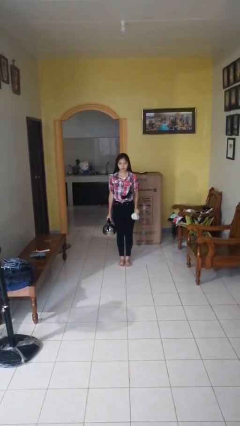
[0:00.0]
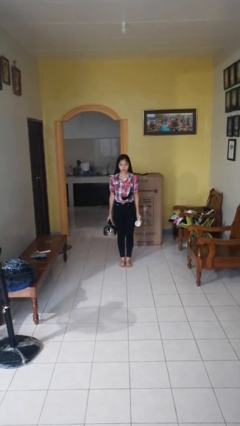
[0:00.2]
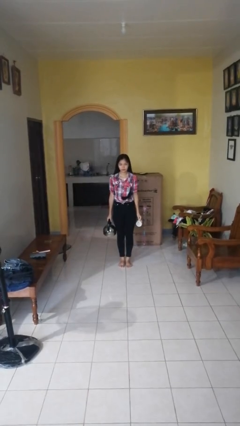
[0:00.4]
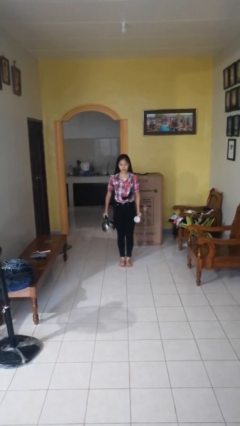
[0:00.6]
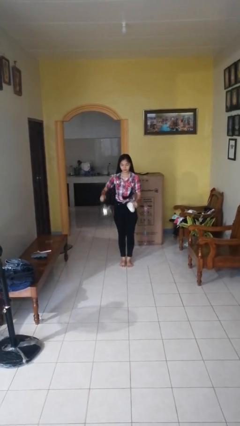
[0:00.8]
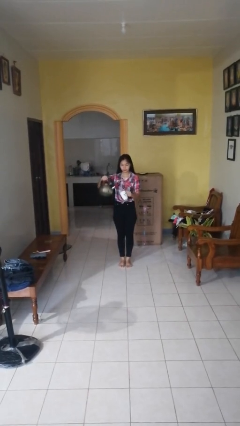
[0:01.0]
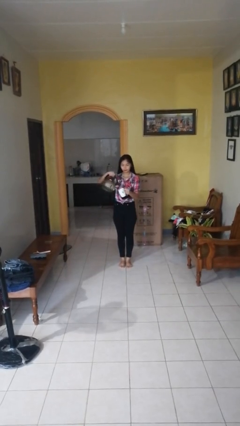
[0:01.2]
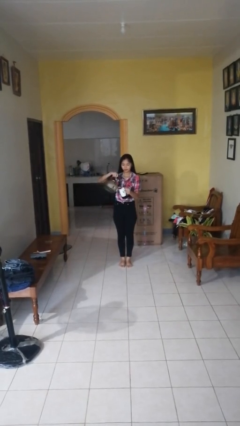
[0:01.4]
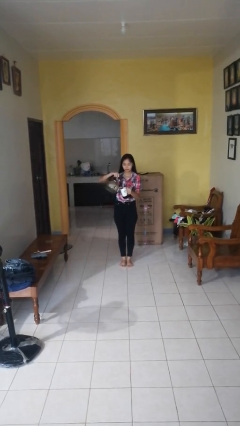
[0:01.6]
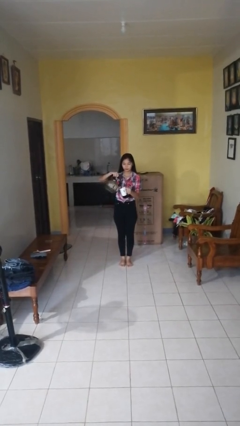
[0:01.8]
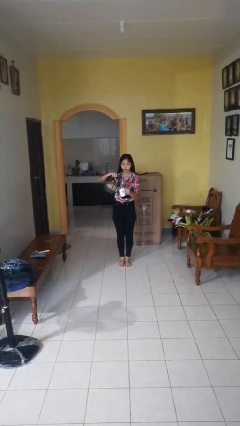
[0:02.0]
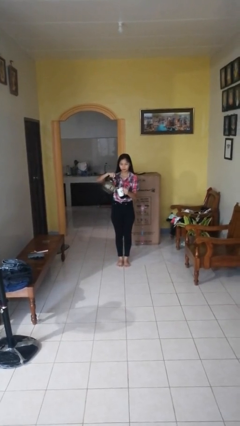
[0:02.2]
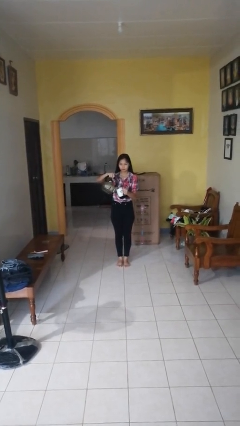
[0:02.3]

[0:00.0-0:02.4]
person pours coffee into mug

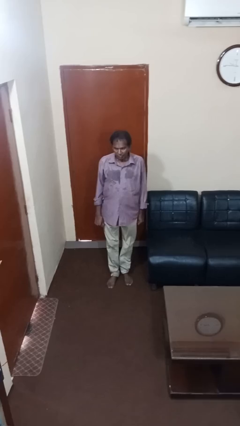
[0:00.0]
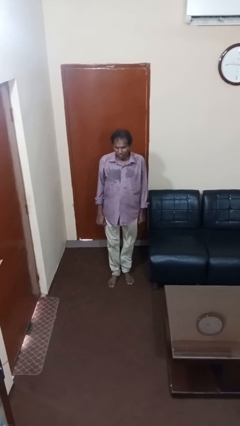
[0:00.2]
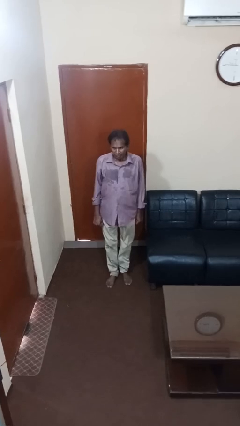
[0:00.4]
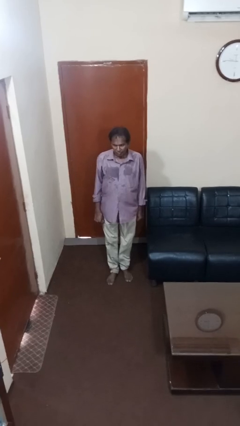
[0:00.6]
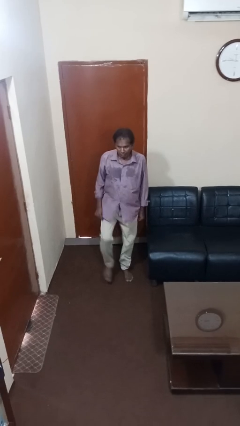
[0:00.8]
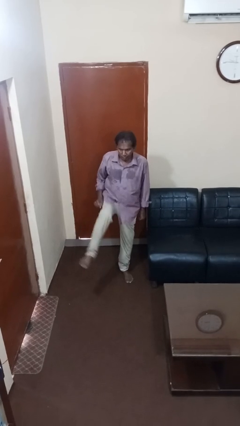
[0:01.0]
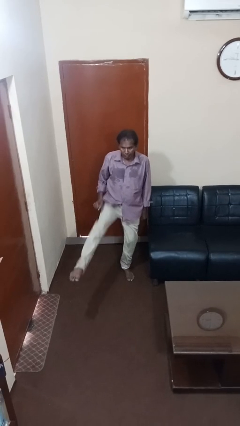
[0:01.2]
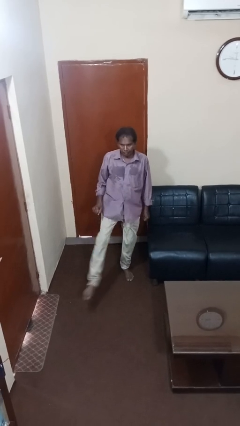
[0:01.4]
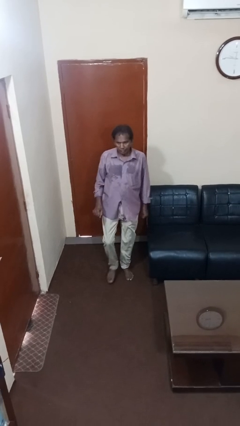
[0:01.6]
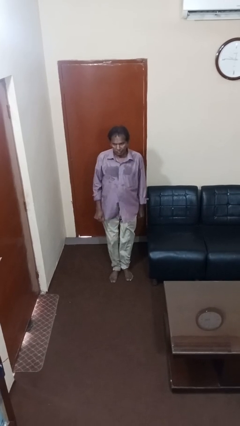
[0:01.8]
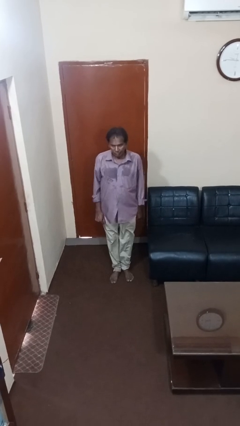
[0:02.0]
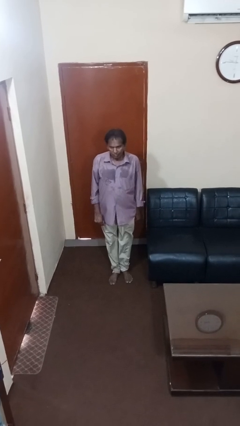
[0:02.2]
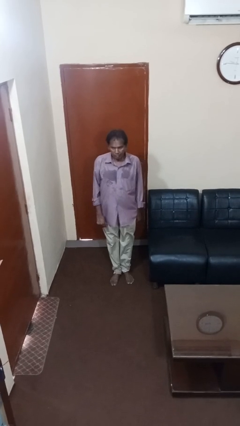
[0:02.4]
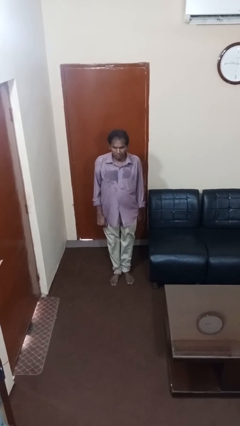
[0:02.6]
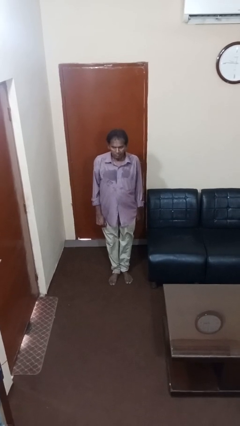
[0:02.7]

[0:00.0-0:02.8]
person karate kicks

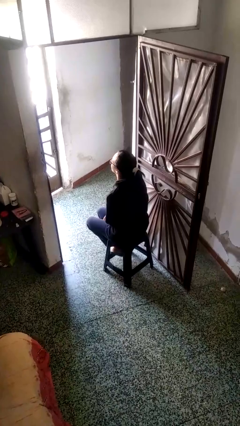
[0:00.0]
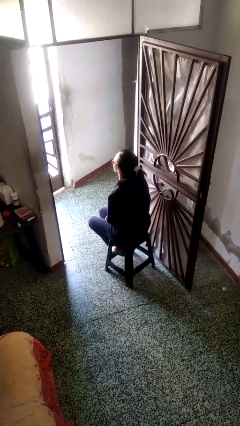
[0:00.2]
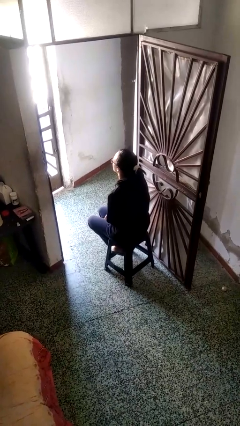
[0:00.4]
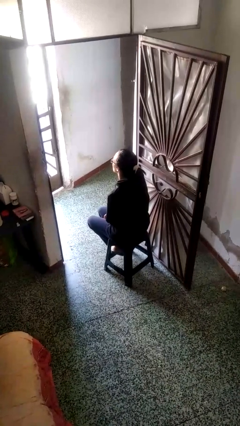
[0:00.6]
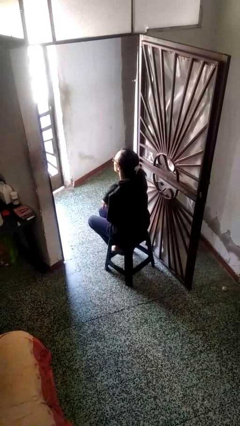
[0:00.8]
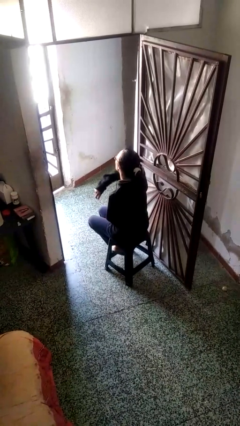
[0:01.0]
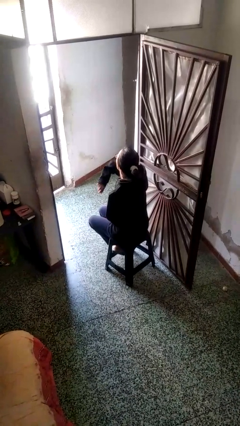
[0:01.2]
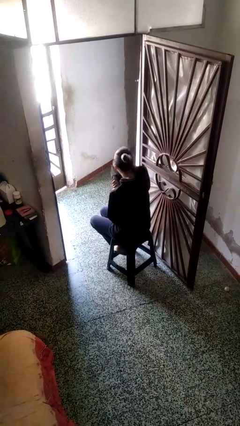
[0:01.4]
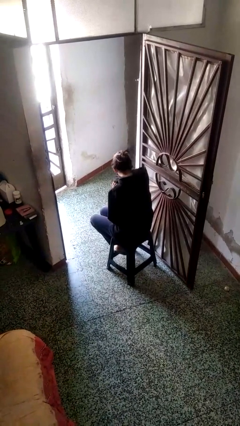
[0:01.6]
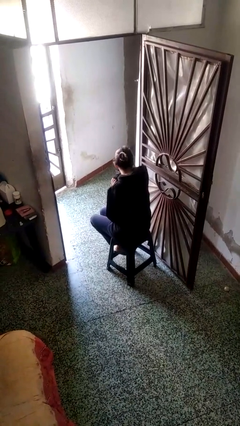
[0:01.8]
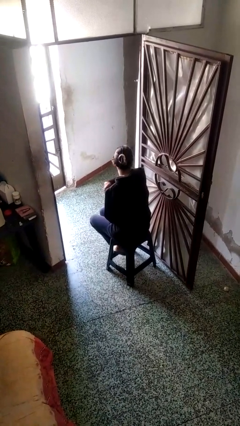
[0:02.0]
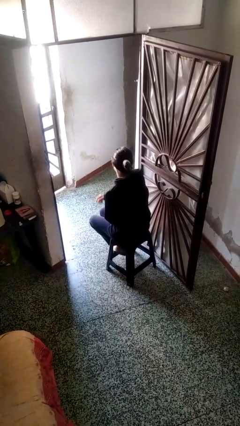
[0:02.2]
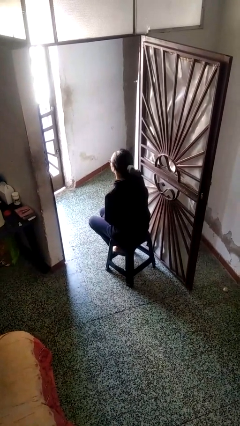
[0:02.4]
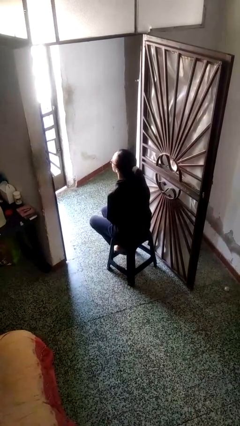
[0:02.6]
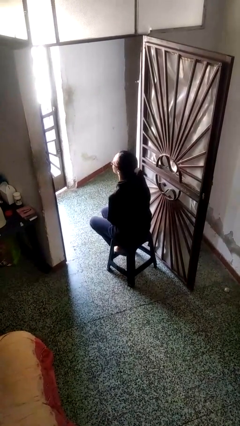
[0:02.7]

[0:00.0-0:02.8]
person sneezes into arm

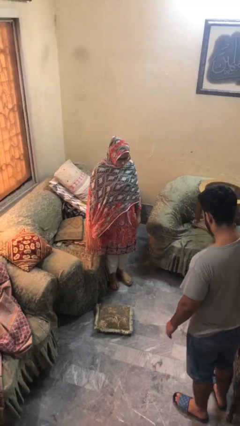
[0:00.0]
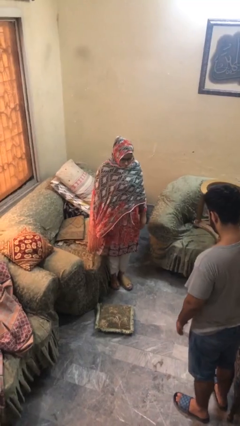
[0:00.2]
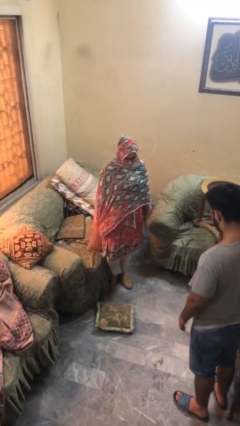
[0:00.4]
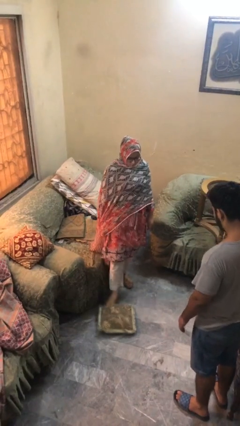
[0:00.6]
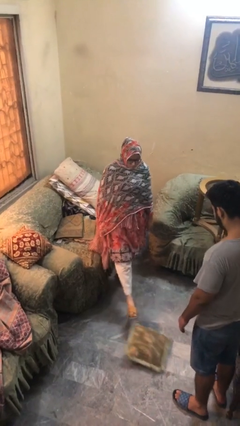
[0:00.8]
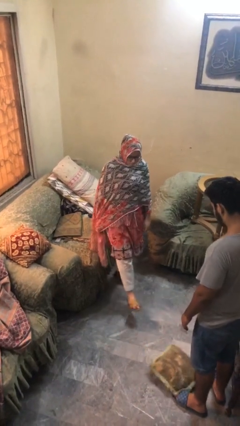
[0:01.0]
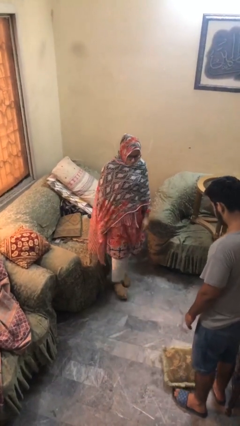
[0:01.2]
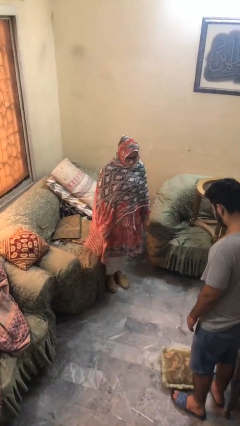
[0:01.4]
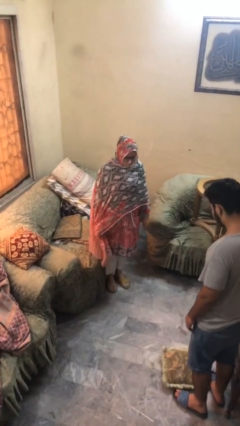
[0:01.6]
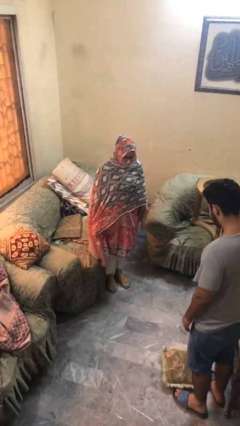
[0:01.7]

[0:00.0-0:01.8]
person kicks object to person

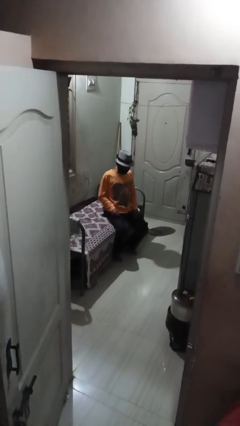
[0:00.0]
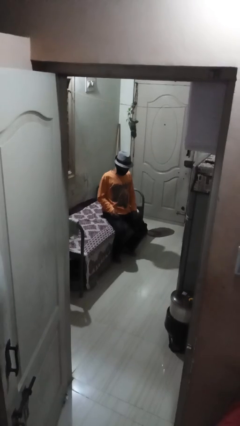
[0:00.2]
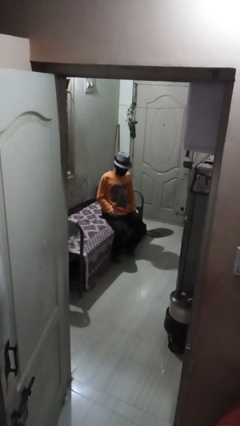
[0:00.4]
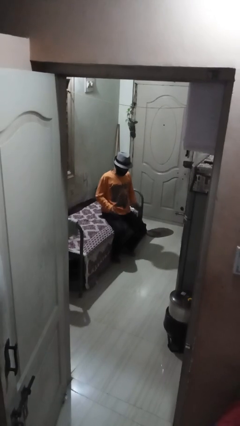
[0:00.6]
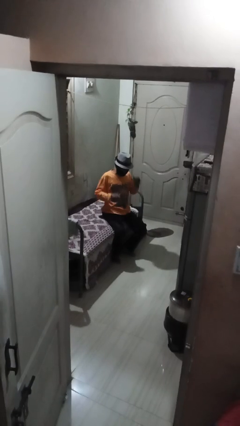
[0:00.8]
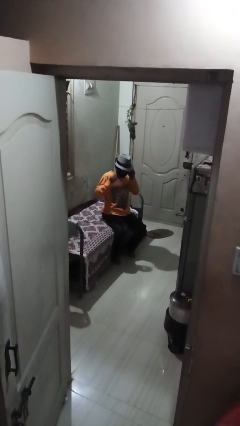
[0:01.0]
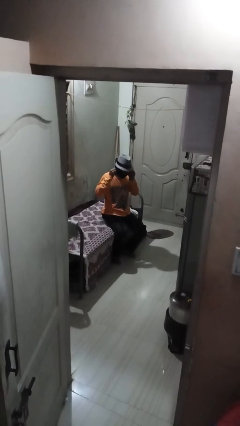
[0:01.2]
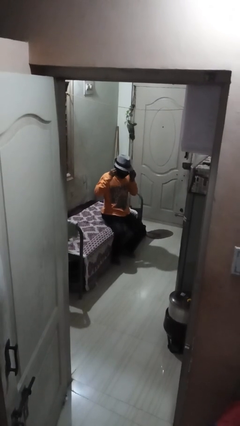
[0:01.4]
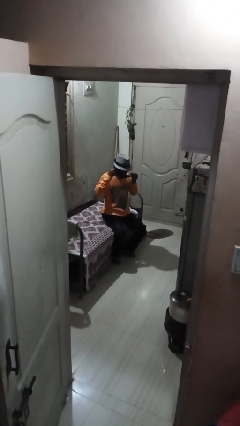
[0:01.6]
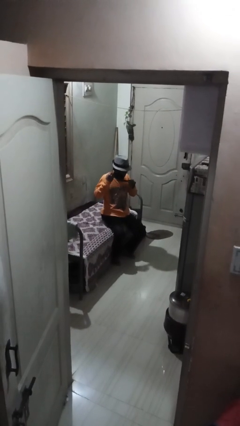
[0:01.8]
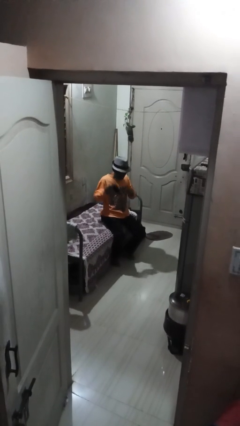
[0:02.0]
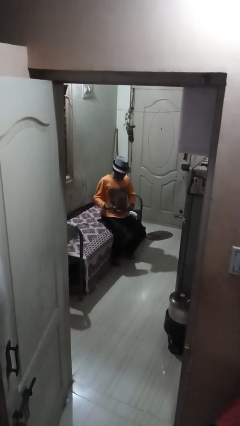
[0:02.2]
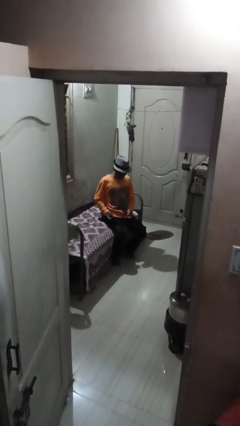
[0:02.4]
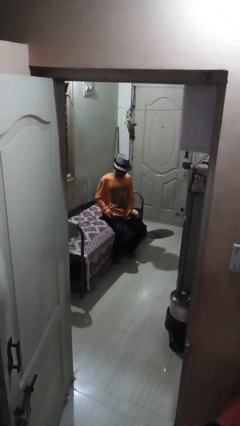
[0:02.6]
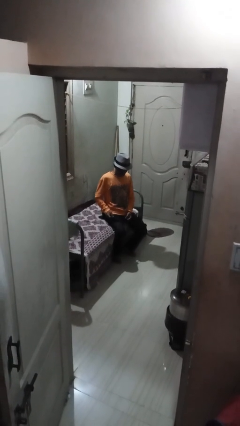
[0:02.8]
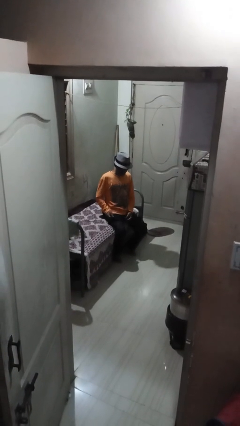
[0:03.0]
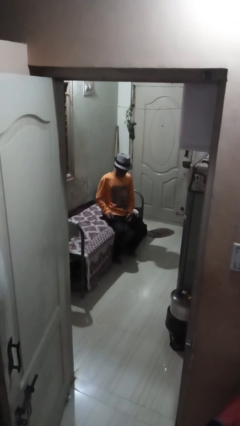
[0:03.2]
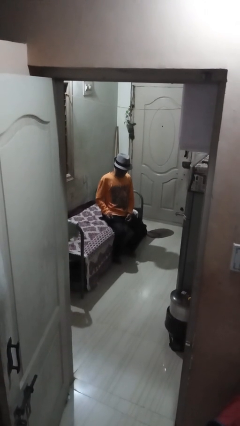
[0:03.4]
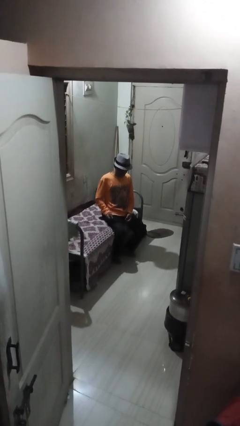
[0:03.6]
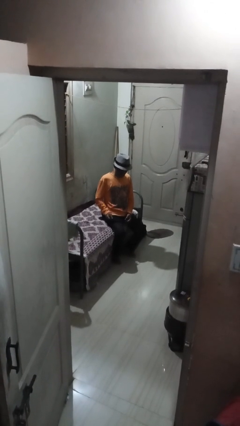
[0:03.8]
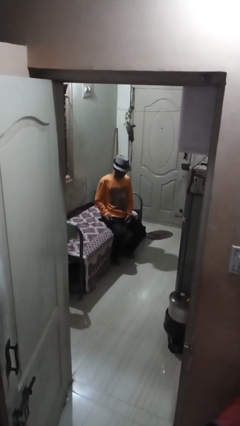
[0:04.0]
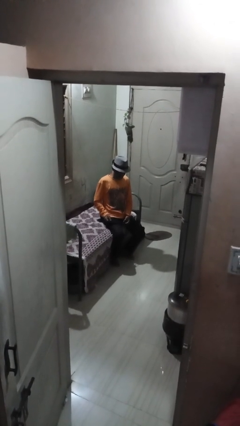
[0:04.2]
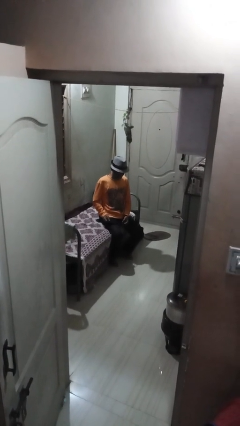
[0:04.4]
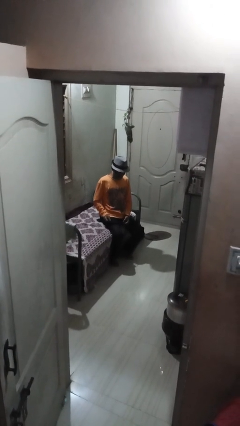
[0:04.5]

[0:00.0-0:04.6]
person takes off facemask

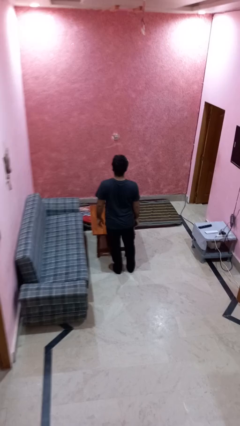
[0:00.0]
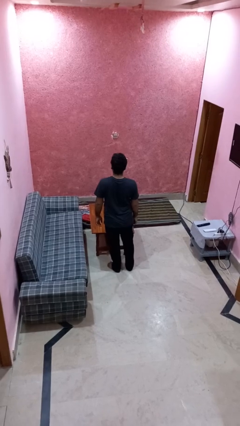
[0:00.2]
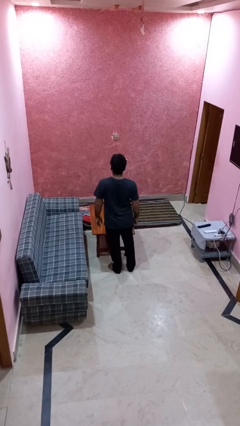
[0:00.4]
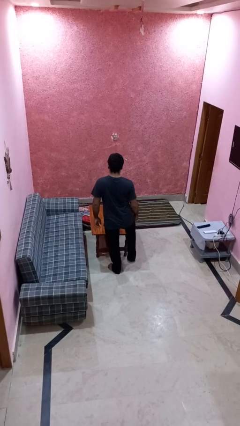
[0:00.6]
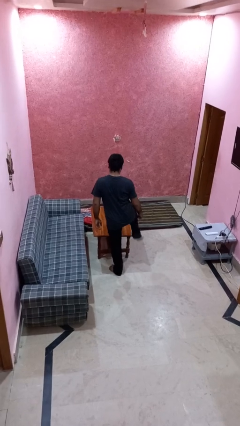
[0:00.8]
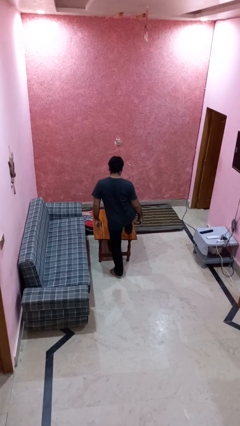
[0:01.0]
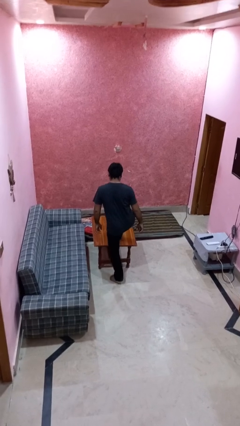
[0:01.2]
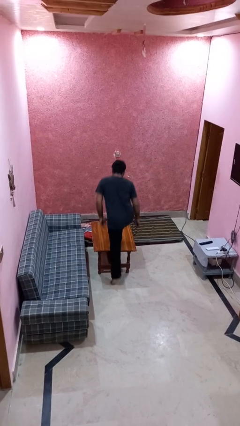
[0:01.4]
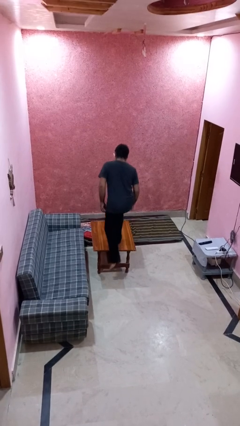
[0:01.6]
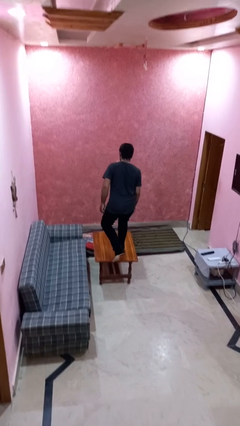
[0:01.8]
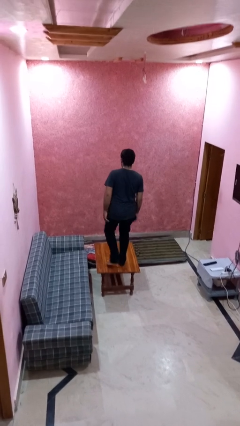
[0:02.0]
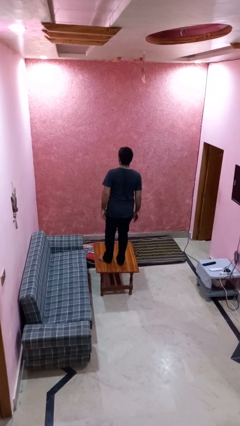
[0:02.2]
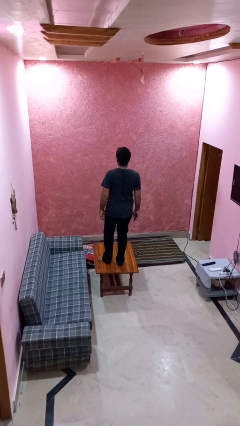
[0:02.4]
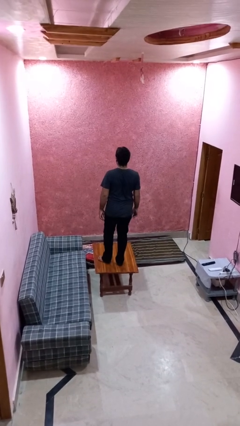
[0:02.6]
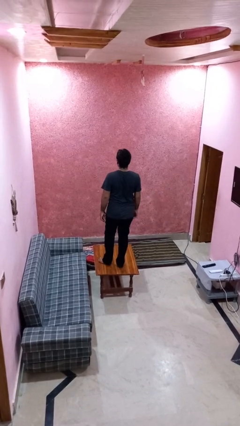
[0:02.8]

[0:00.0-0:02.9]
person climbs on table

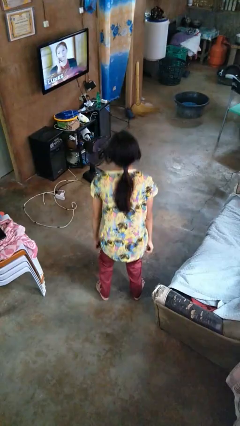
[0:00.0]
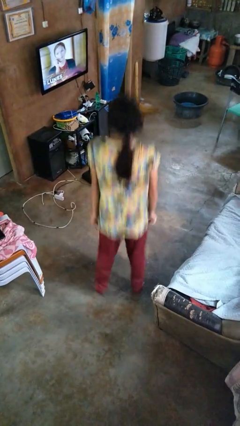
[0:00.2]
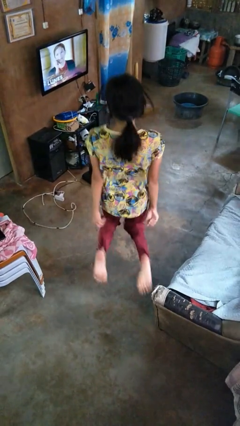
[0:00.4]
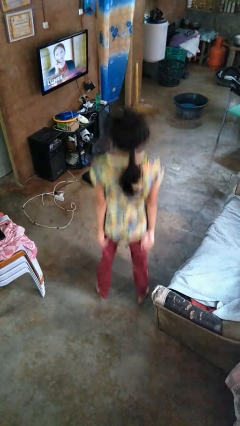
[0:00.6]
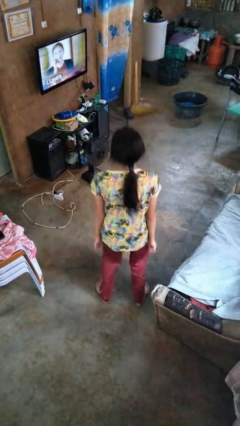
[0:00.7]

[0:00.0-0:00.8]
person jumps
